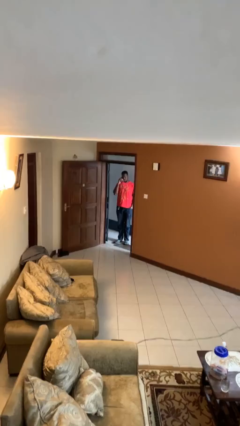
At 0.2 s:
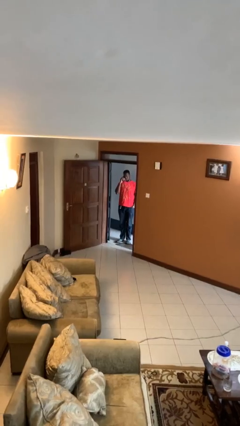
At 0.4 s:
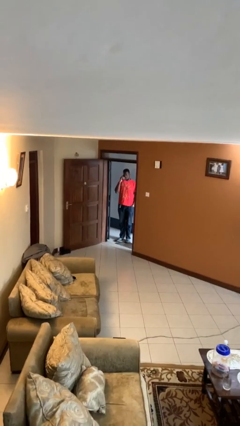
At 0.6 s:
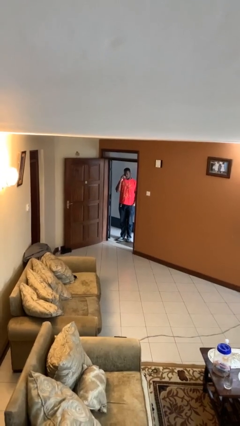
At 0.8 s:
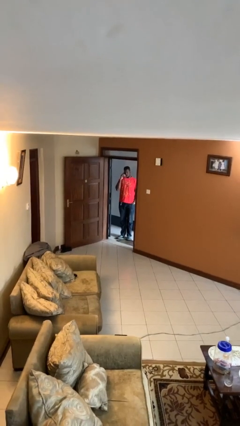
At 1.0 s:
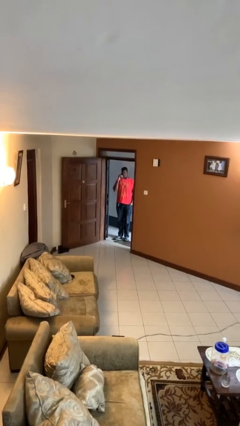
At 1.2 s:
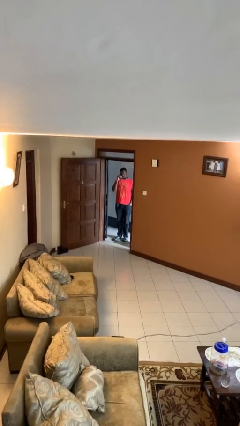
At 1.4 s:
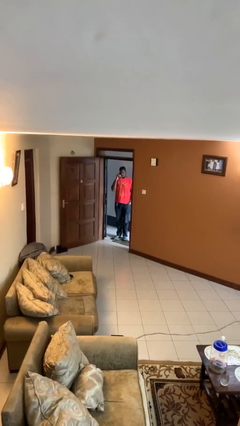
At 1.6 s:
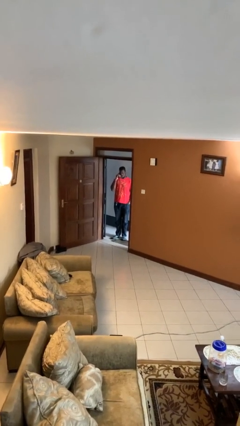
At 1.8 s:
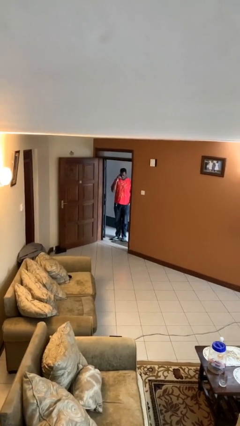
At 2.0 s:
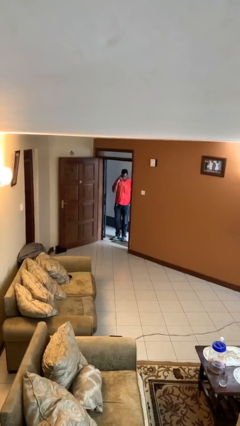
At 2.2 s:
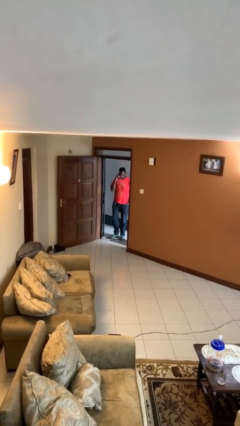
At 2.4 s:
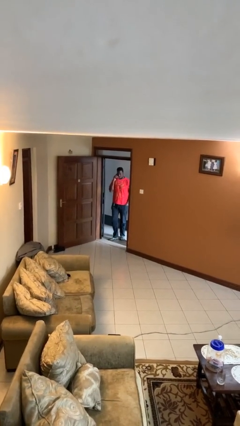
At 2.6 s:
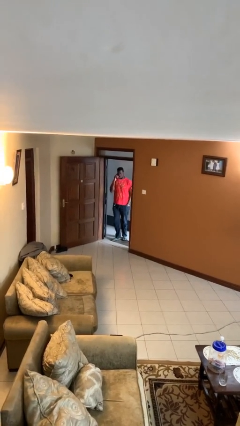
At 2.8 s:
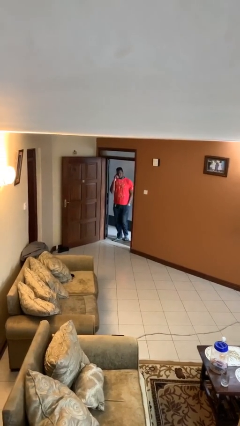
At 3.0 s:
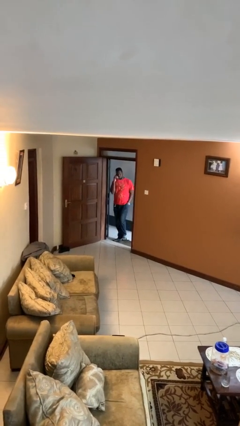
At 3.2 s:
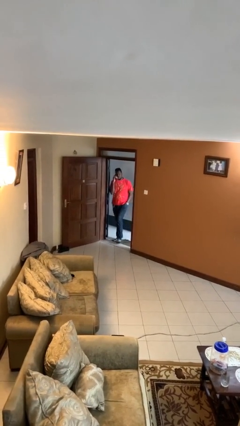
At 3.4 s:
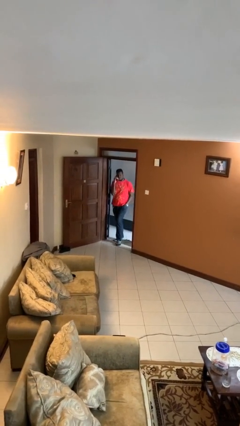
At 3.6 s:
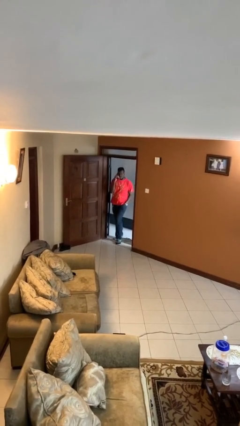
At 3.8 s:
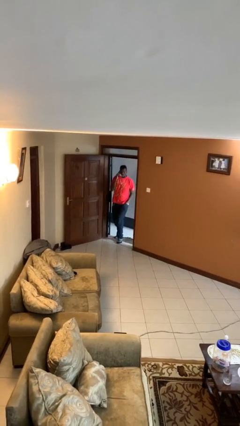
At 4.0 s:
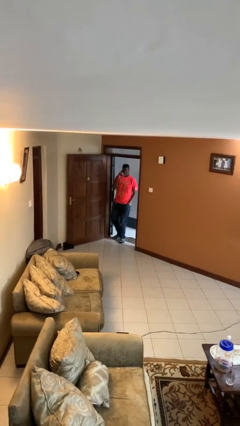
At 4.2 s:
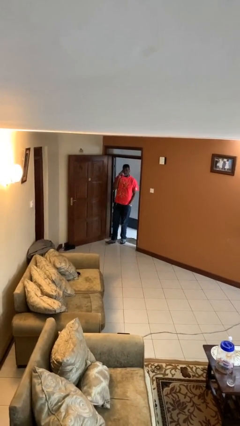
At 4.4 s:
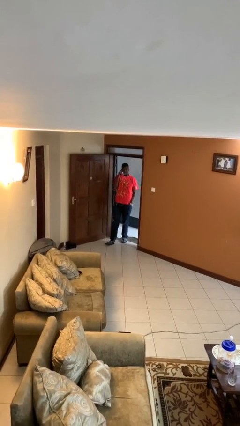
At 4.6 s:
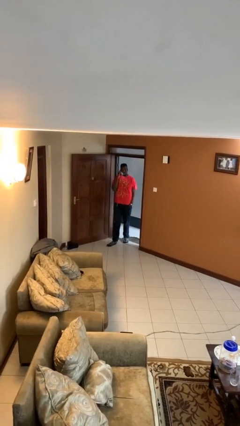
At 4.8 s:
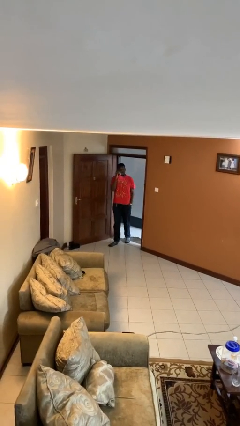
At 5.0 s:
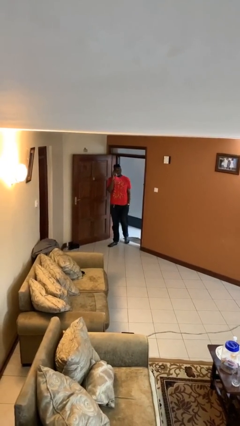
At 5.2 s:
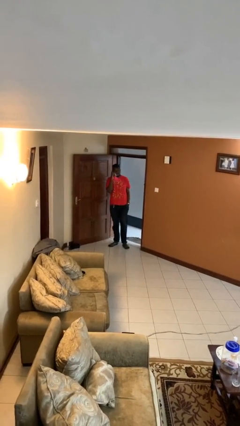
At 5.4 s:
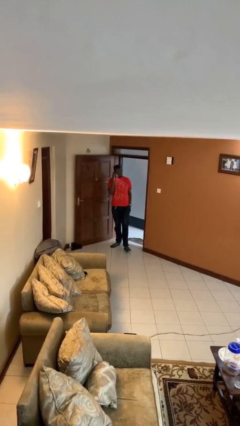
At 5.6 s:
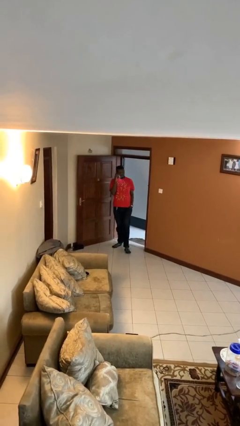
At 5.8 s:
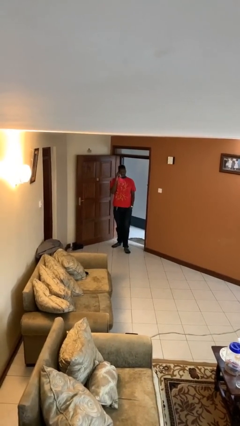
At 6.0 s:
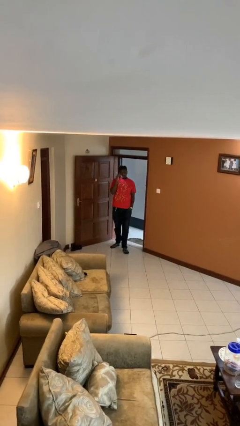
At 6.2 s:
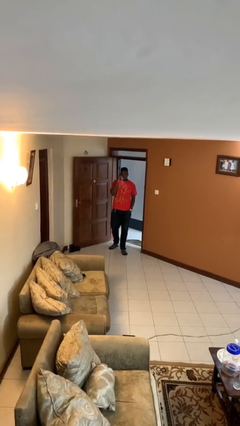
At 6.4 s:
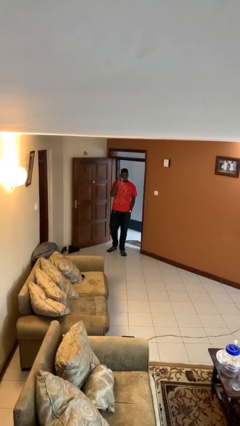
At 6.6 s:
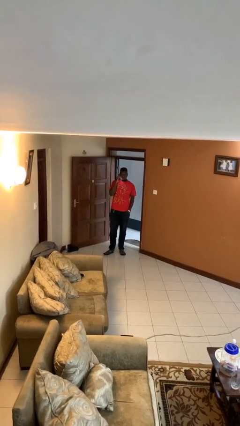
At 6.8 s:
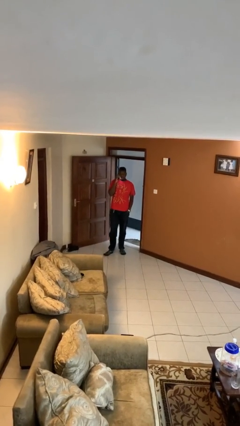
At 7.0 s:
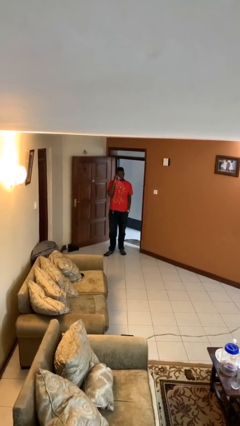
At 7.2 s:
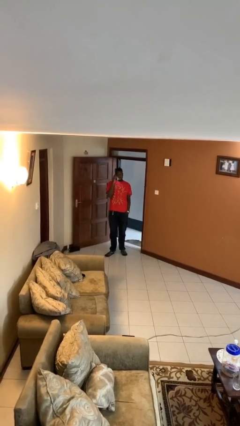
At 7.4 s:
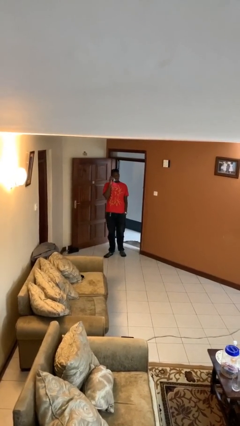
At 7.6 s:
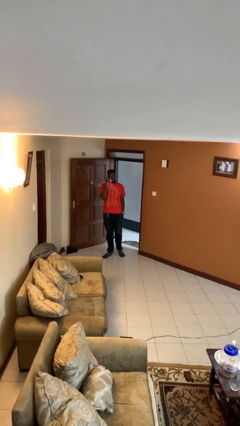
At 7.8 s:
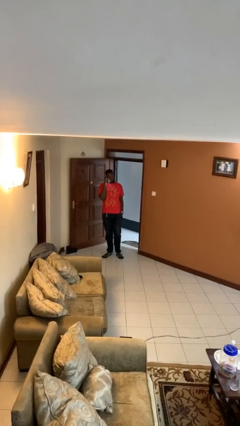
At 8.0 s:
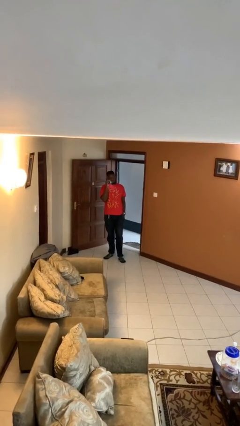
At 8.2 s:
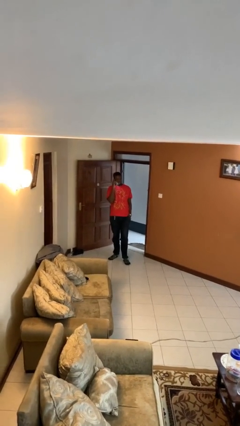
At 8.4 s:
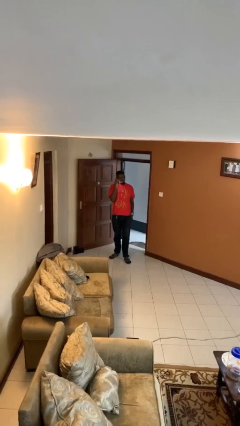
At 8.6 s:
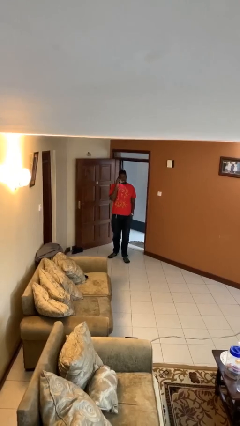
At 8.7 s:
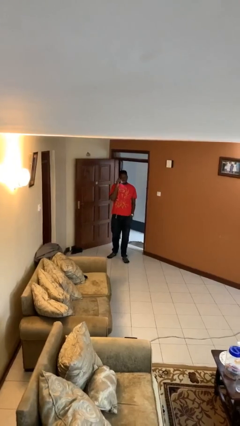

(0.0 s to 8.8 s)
person enters scene through structure

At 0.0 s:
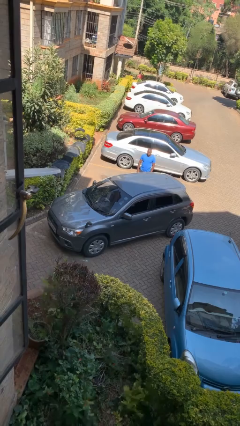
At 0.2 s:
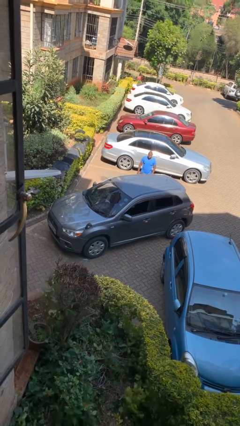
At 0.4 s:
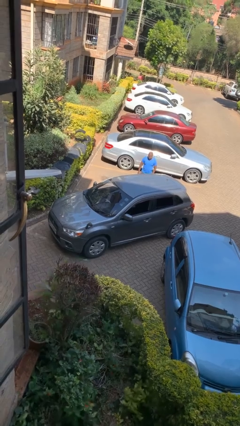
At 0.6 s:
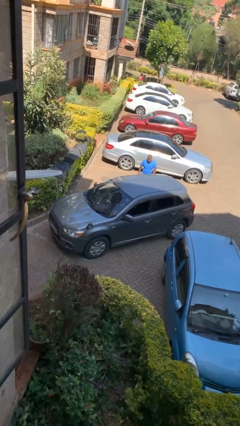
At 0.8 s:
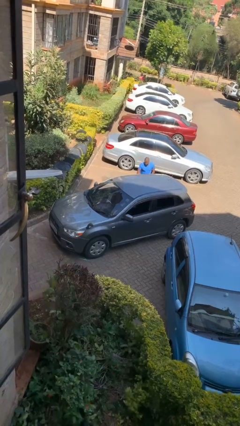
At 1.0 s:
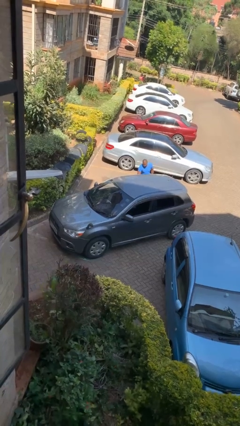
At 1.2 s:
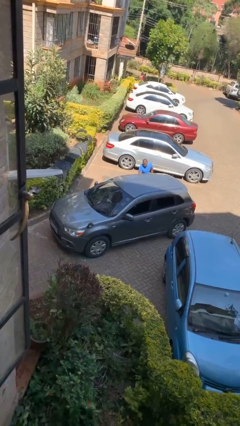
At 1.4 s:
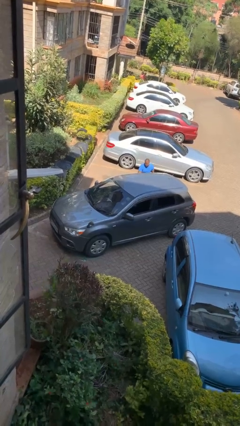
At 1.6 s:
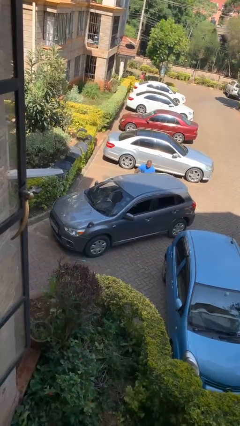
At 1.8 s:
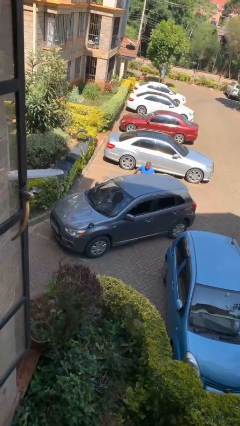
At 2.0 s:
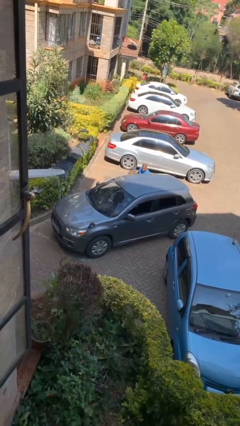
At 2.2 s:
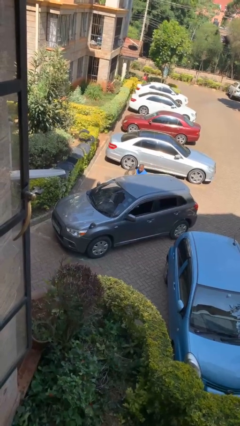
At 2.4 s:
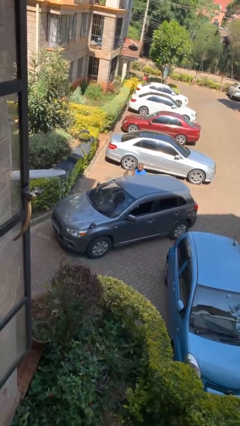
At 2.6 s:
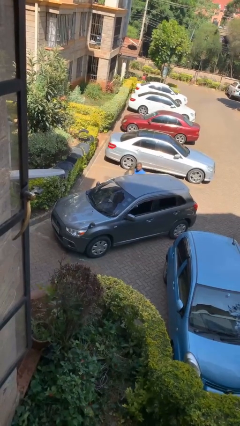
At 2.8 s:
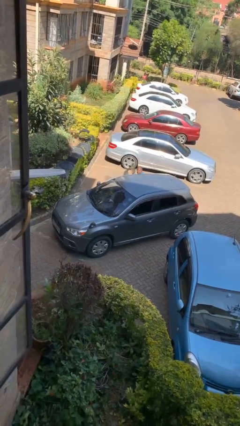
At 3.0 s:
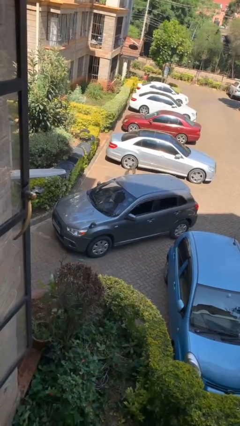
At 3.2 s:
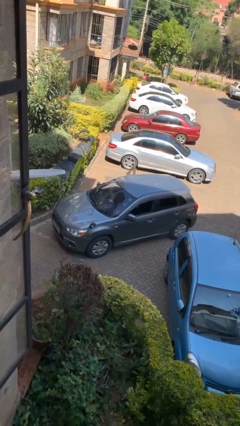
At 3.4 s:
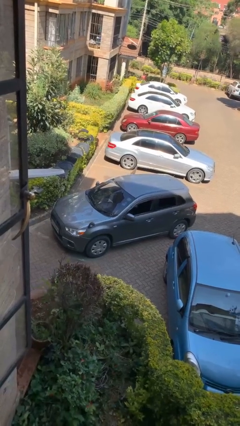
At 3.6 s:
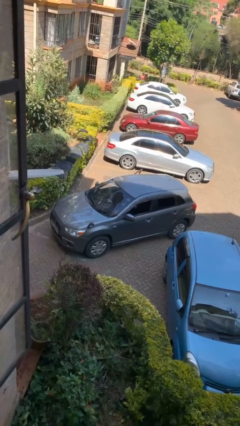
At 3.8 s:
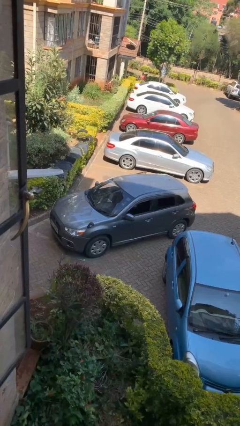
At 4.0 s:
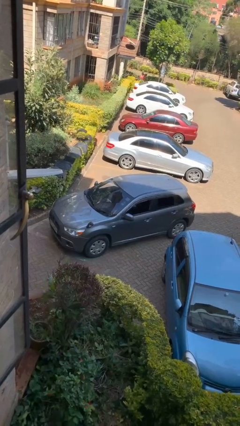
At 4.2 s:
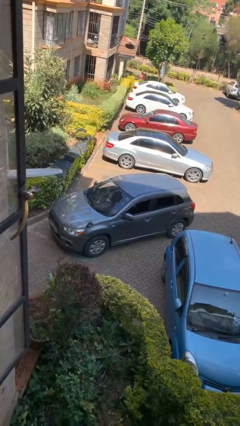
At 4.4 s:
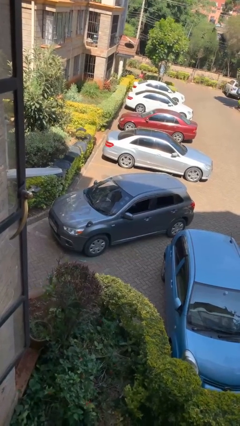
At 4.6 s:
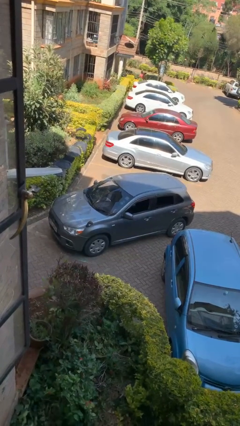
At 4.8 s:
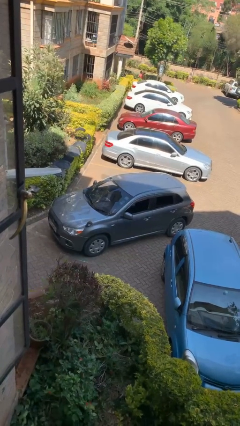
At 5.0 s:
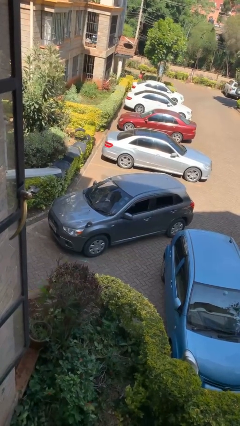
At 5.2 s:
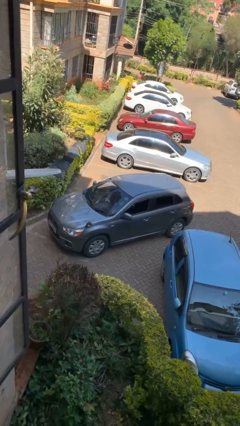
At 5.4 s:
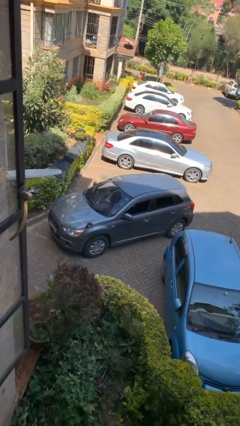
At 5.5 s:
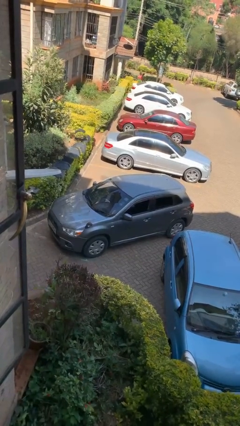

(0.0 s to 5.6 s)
car picks up person

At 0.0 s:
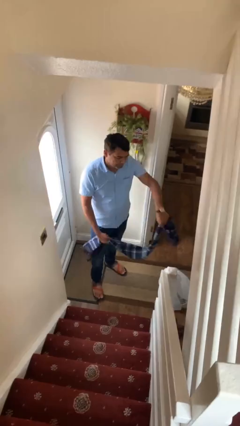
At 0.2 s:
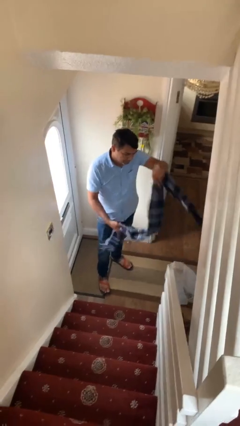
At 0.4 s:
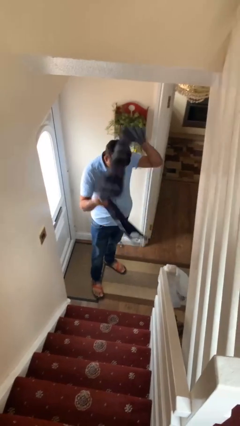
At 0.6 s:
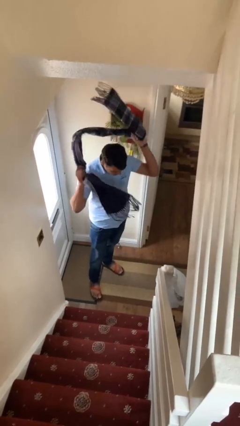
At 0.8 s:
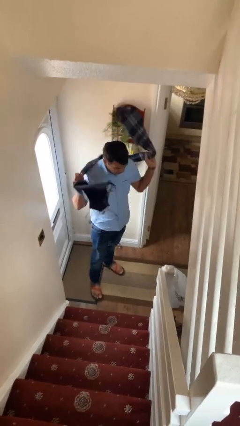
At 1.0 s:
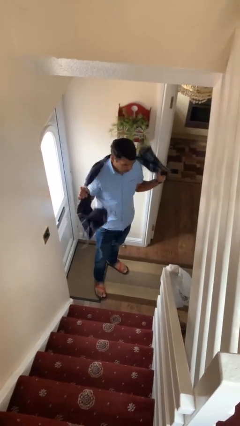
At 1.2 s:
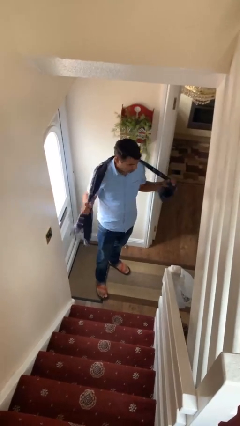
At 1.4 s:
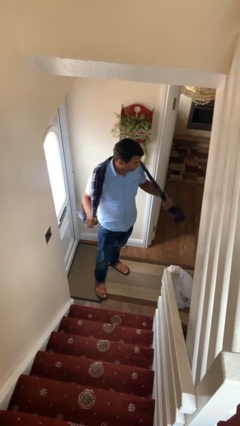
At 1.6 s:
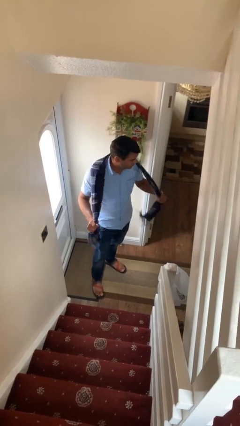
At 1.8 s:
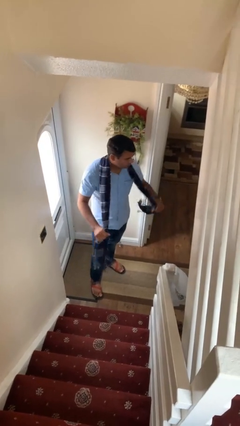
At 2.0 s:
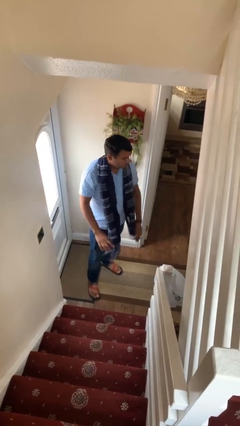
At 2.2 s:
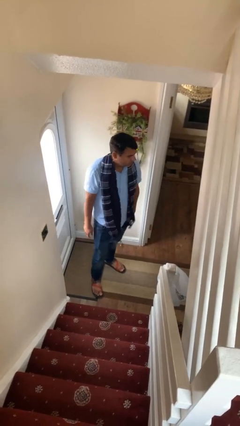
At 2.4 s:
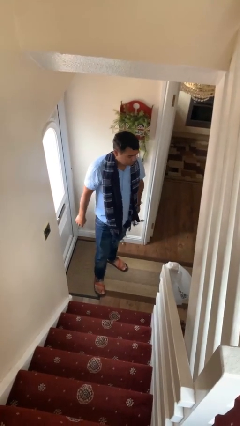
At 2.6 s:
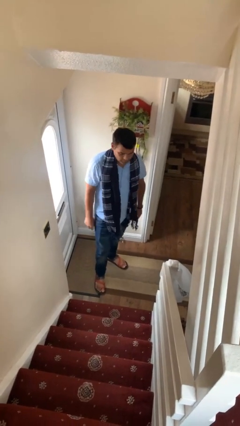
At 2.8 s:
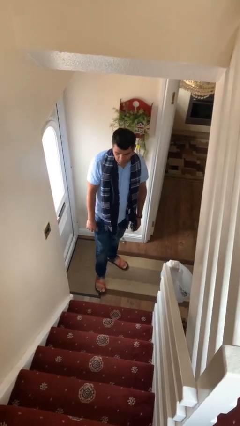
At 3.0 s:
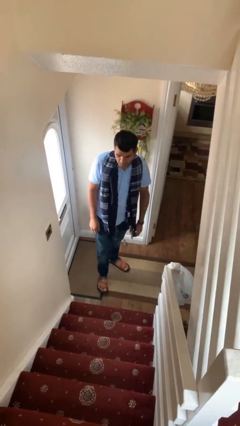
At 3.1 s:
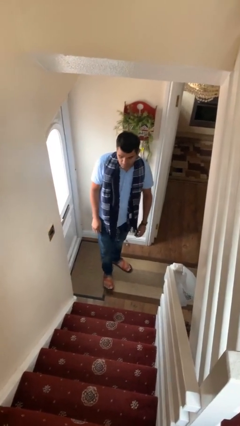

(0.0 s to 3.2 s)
person puts on scarf

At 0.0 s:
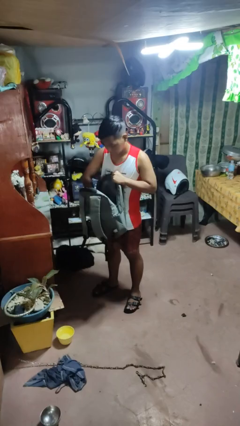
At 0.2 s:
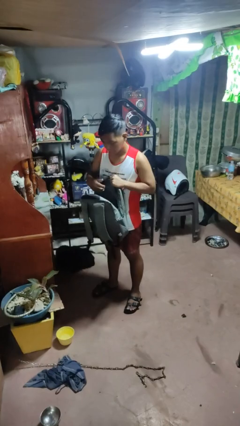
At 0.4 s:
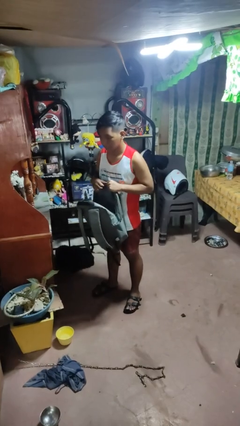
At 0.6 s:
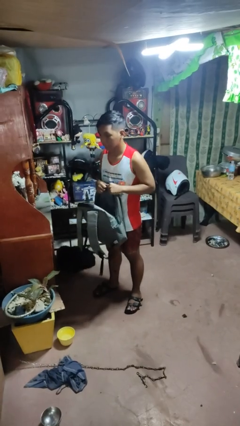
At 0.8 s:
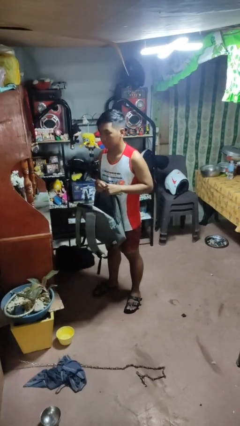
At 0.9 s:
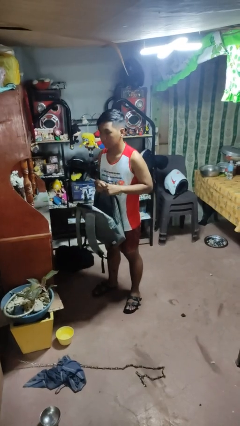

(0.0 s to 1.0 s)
person puts object into bag
